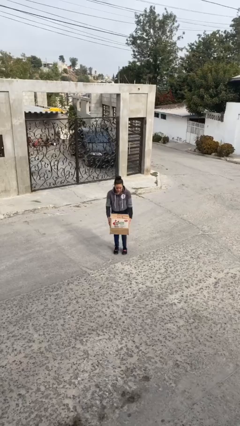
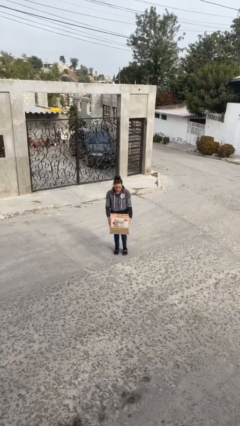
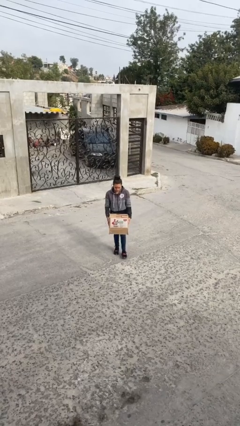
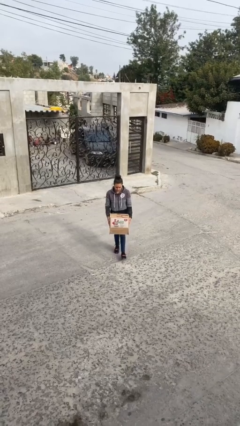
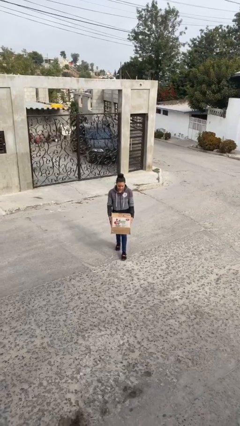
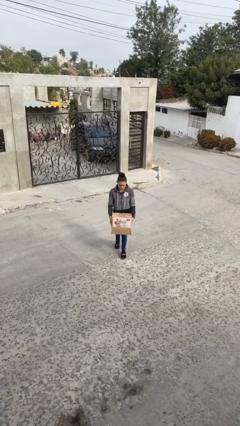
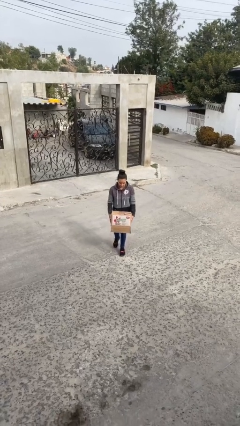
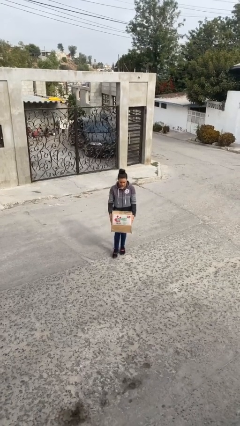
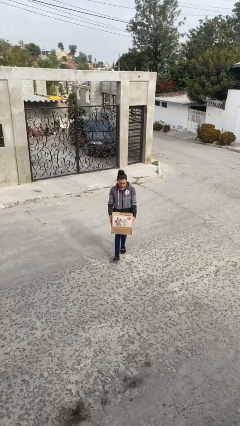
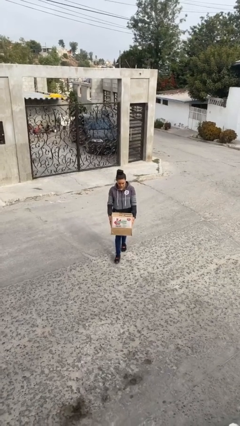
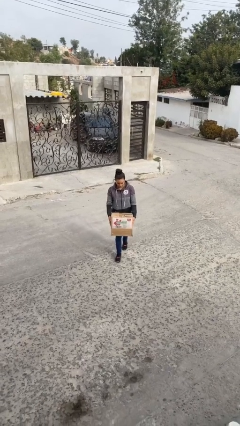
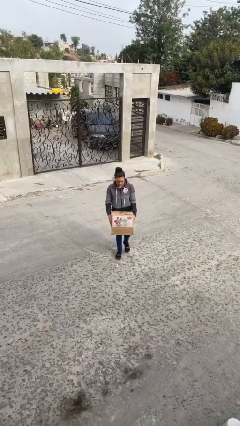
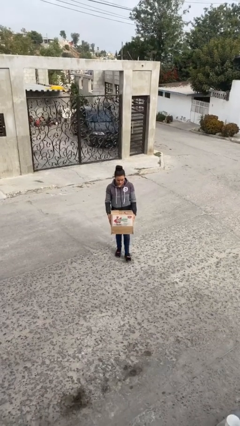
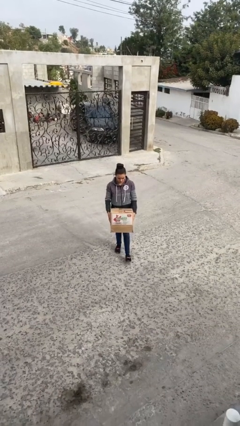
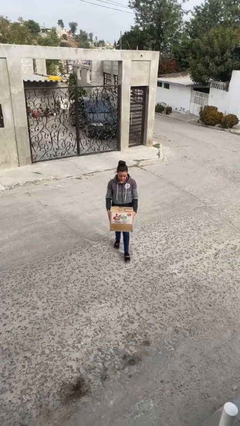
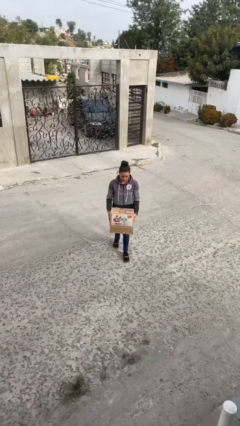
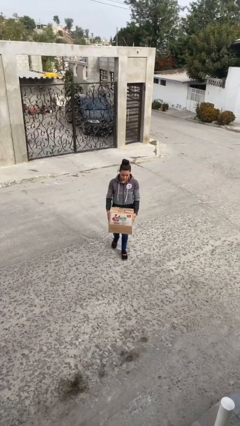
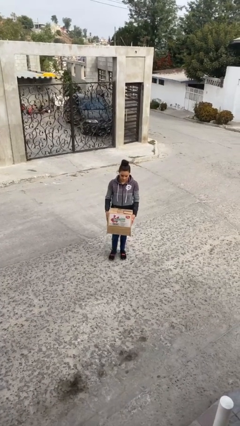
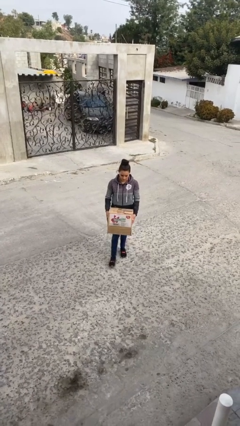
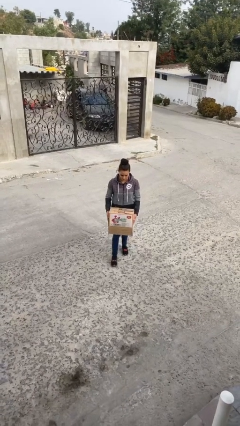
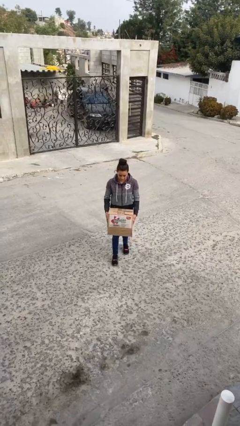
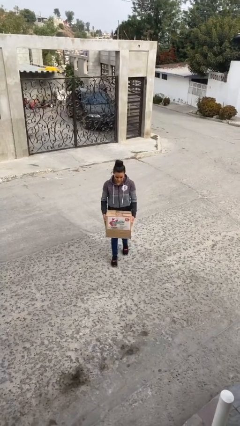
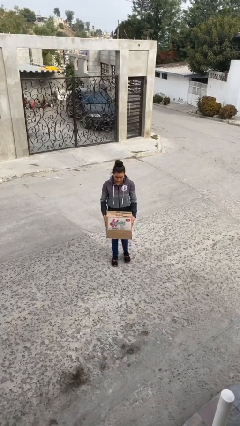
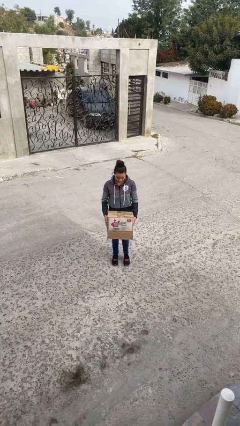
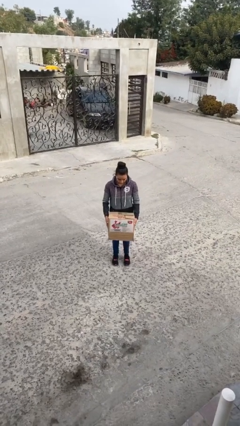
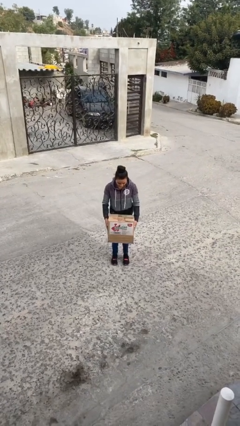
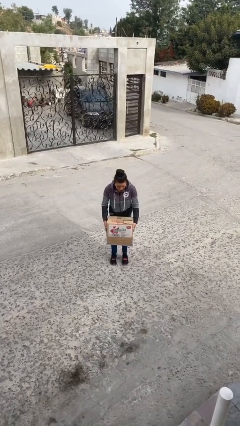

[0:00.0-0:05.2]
person carries heavy object

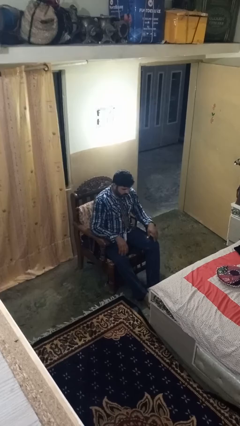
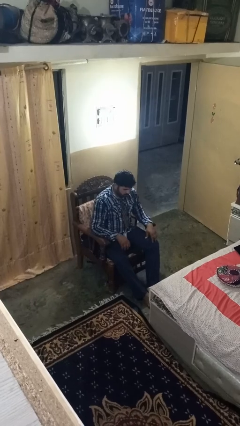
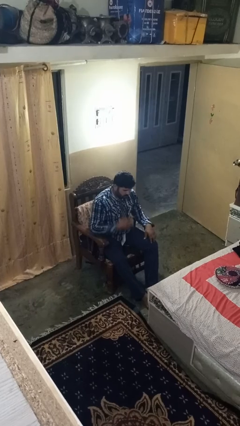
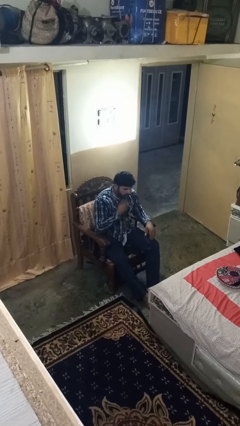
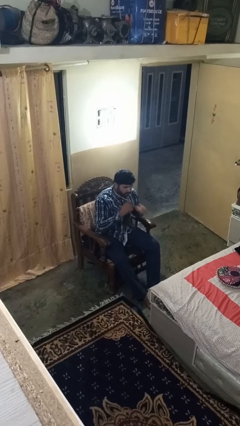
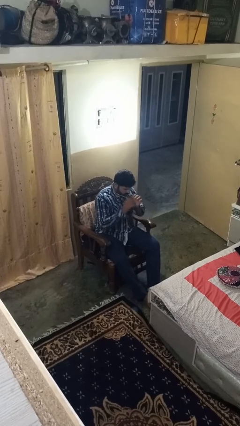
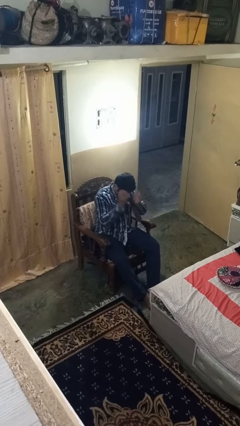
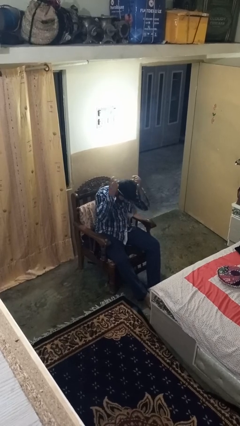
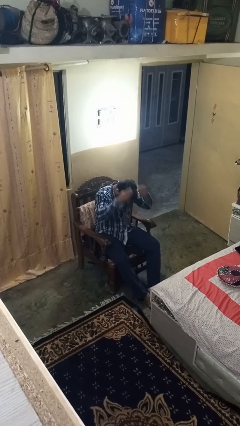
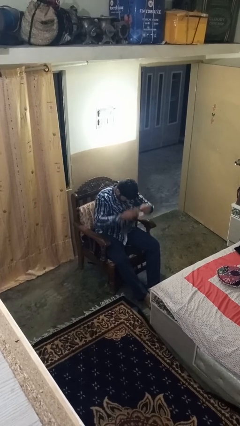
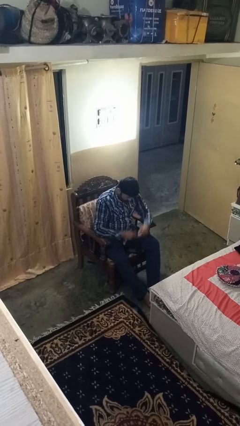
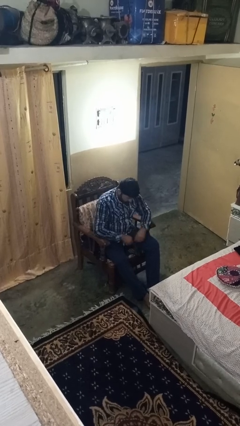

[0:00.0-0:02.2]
person takes off necktie

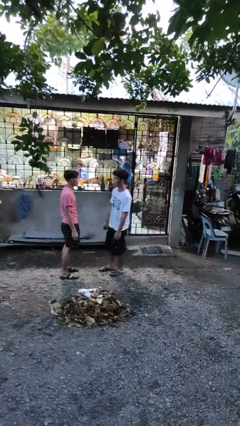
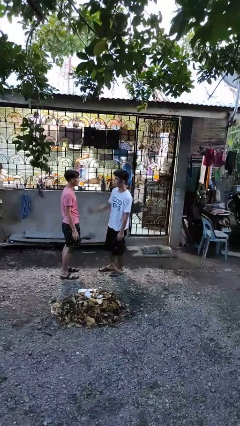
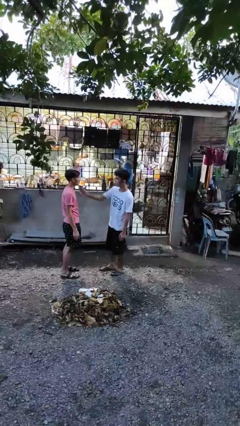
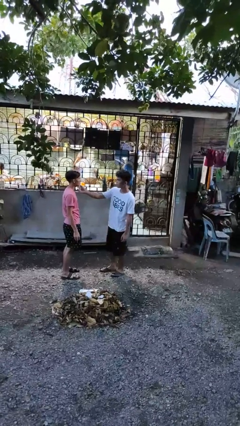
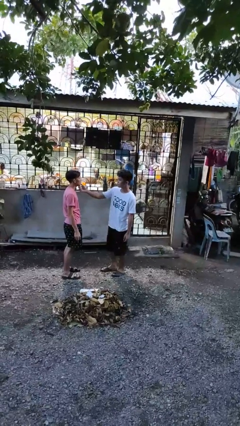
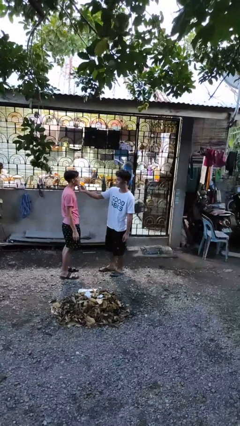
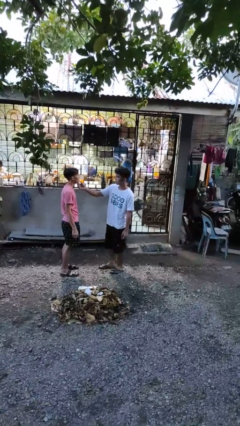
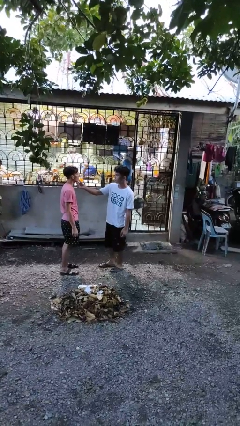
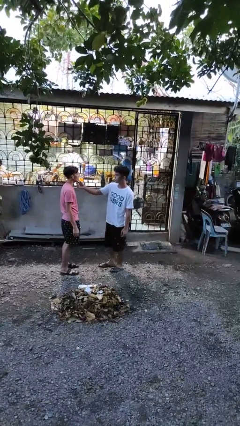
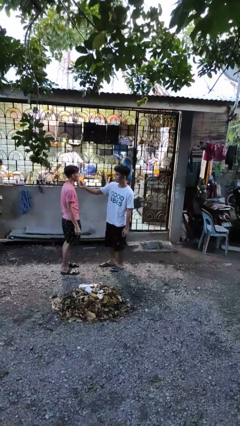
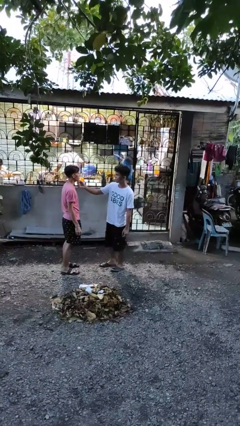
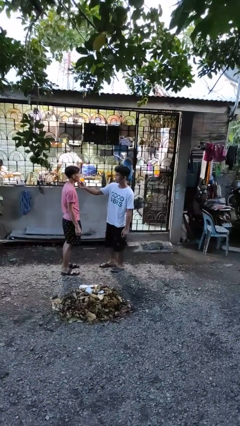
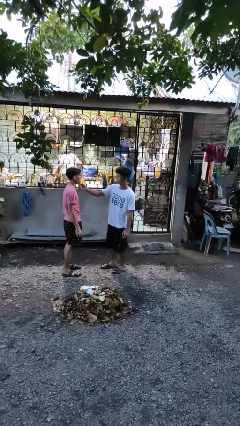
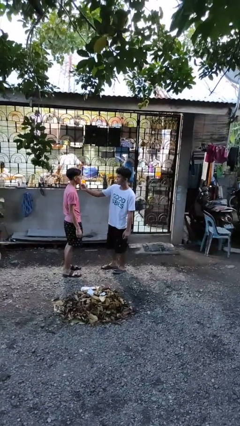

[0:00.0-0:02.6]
person touches face of person

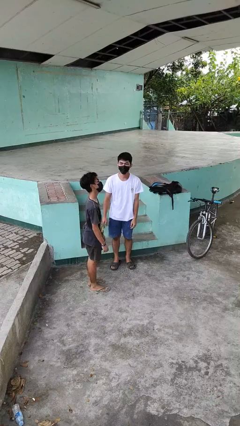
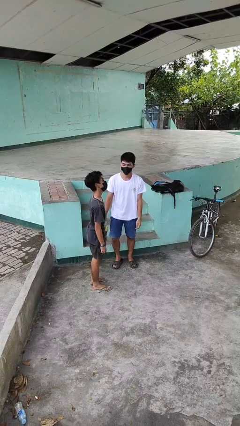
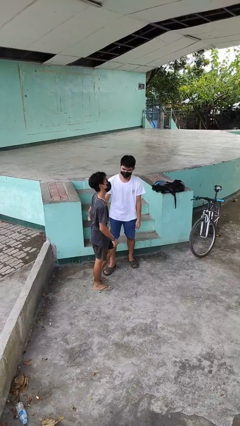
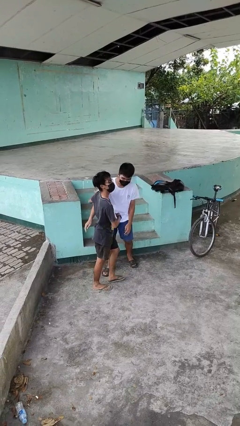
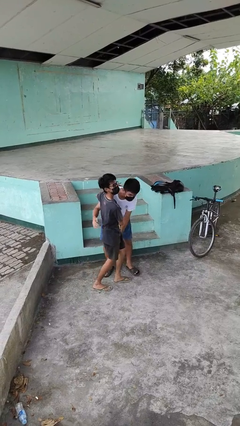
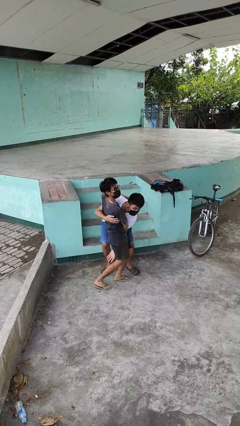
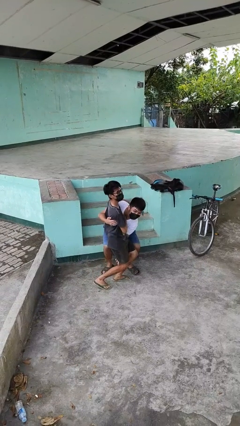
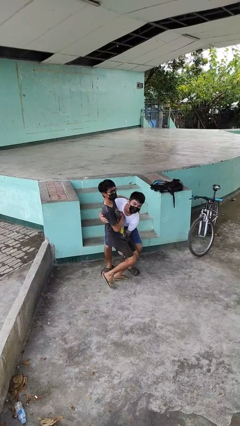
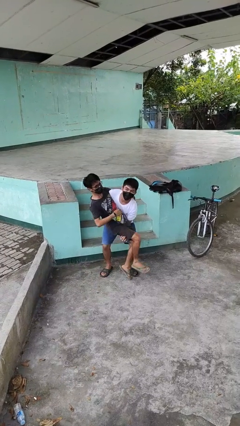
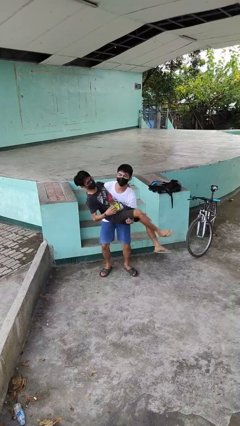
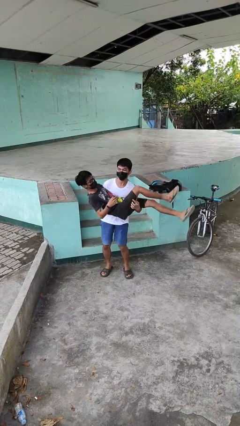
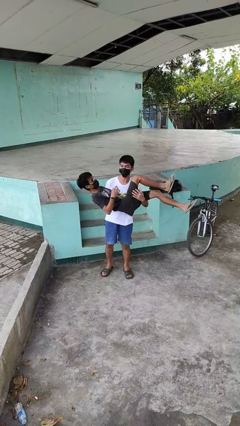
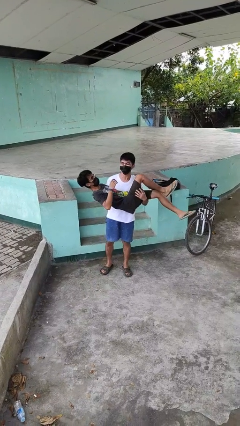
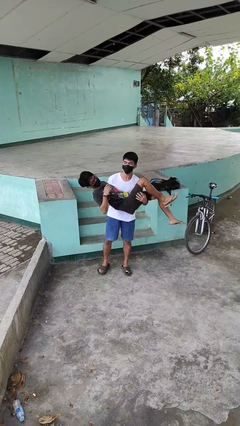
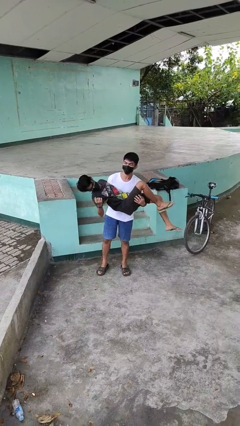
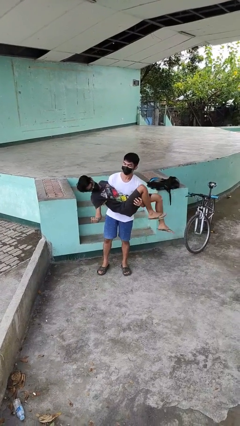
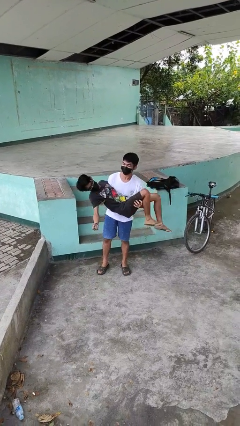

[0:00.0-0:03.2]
person picks up person

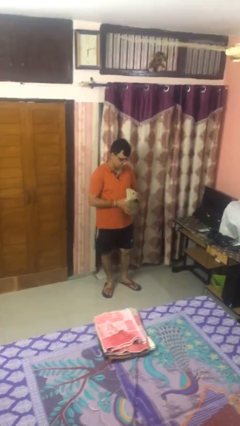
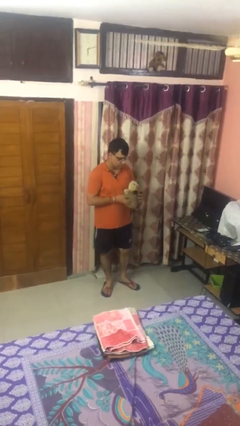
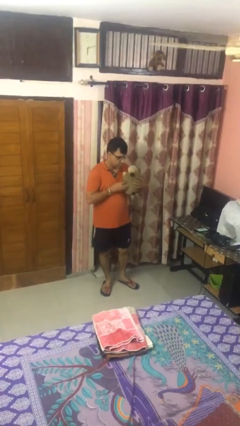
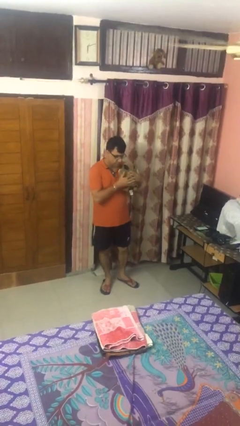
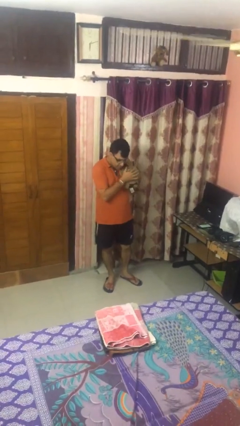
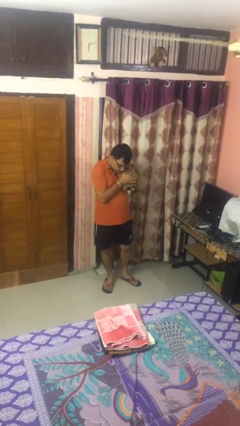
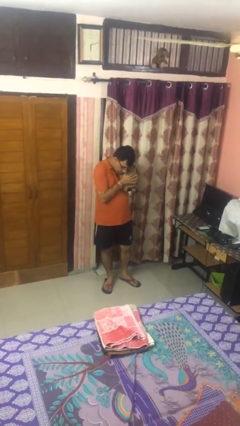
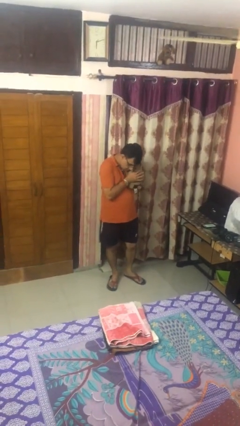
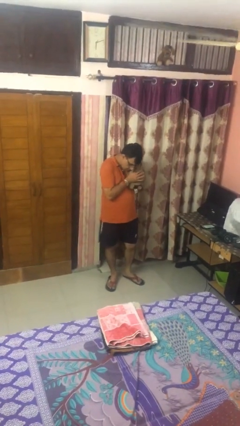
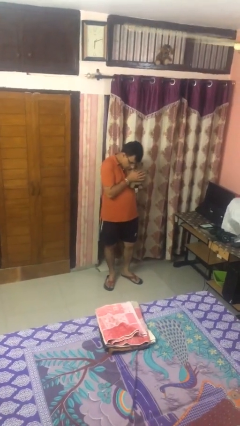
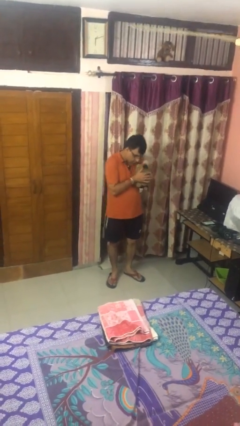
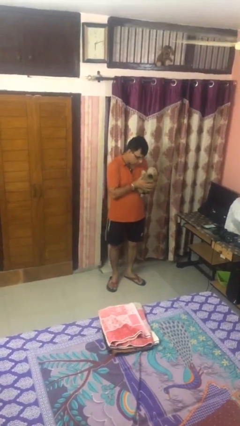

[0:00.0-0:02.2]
person hugs stuffed animal

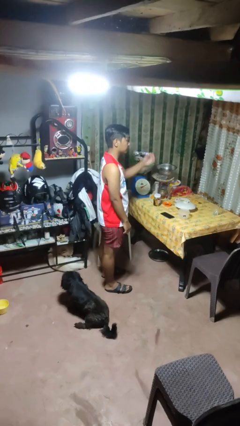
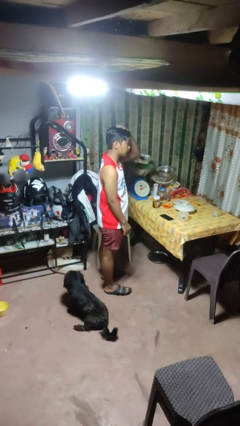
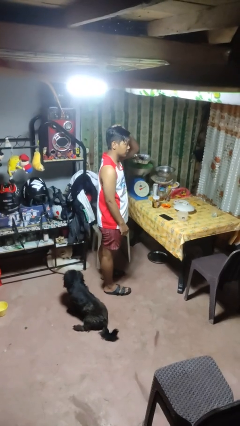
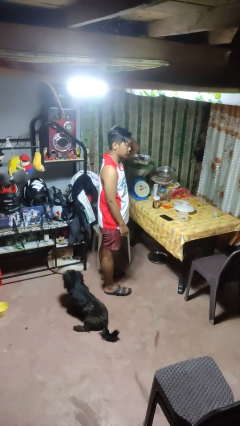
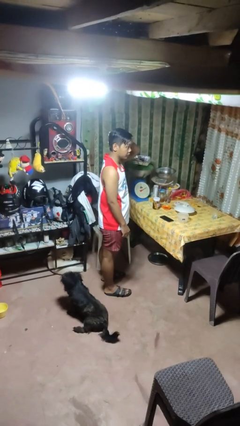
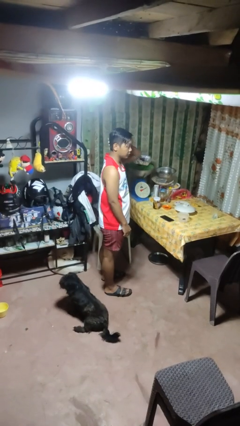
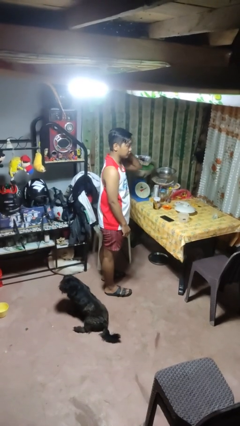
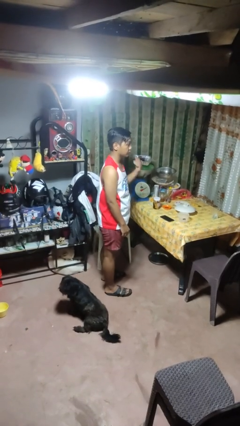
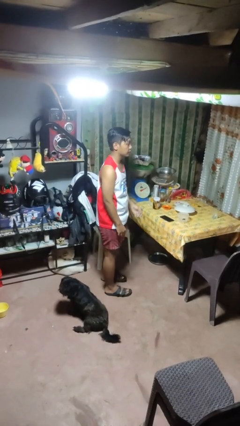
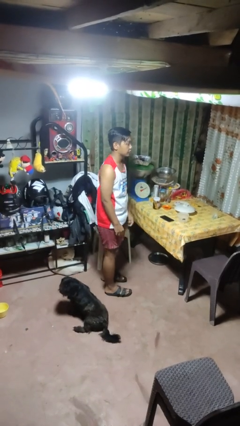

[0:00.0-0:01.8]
person pats head

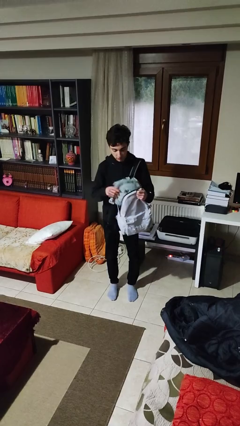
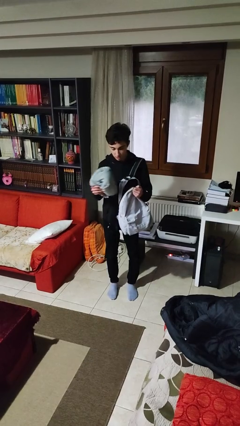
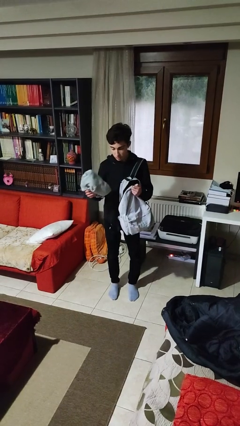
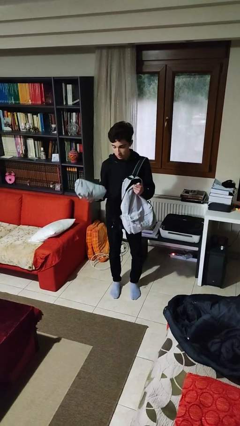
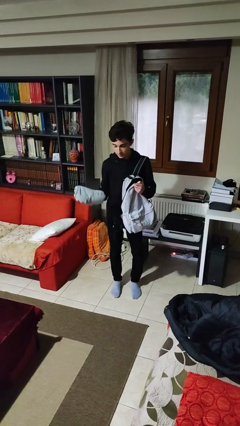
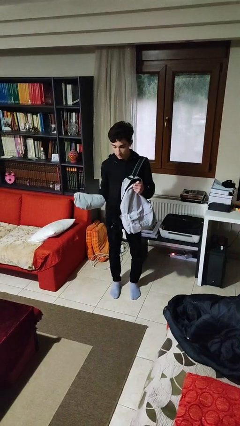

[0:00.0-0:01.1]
person takes object from backpack
